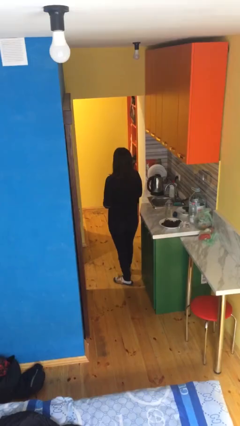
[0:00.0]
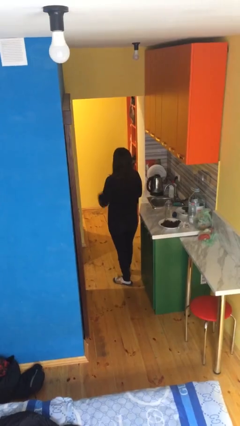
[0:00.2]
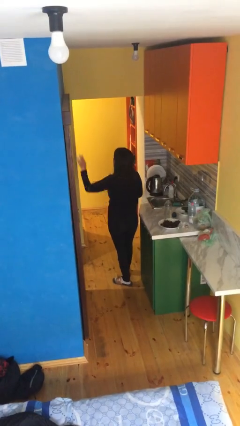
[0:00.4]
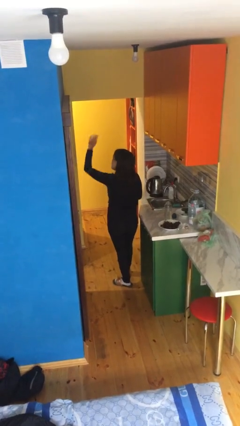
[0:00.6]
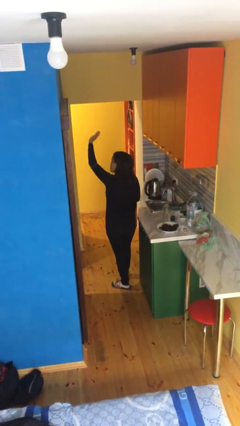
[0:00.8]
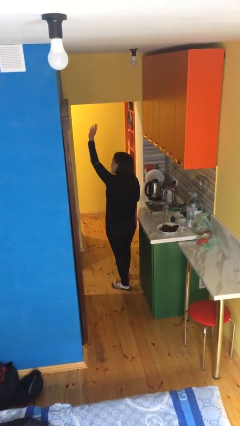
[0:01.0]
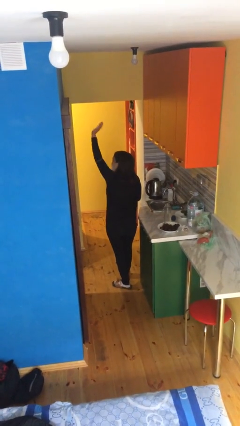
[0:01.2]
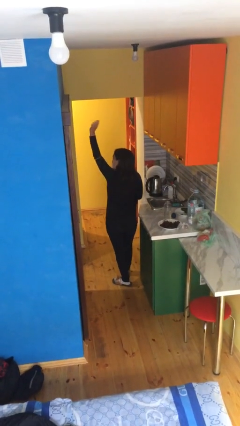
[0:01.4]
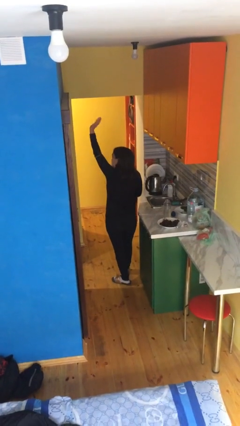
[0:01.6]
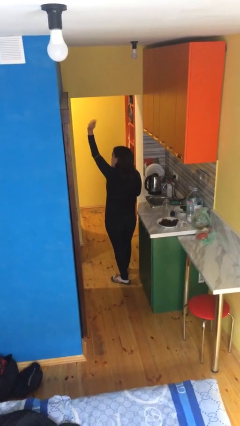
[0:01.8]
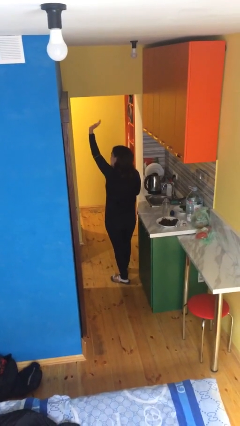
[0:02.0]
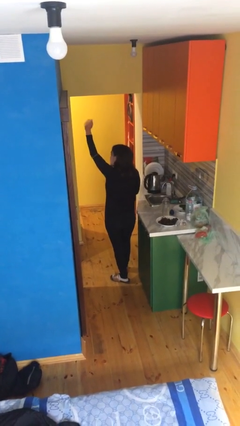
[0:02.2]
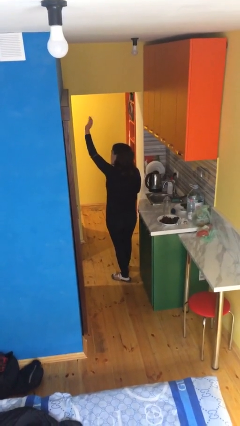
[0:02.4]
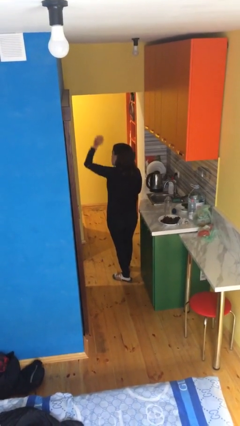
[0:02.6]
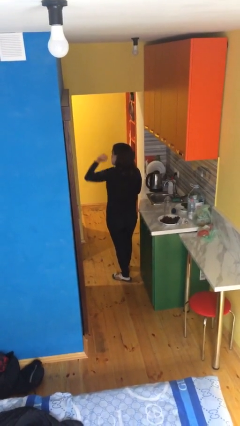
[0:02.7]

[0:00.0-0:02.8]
person waves at person

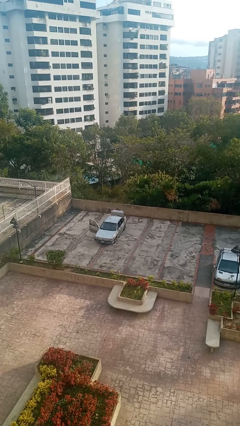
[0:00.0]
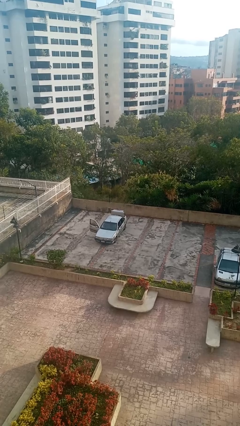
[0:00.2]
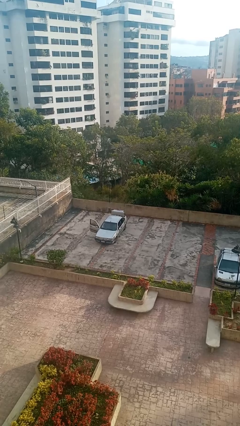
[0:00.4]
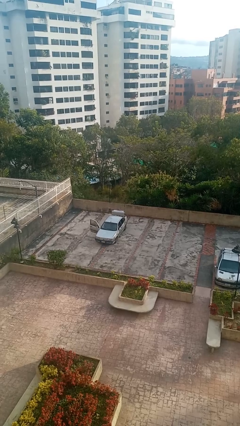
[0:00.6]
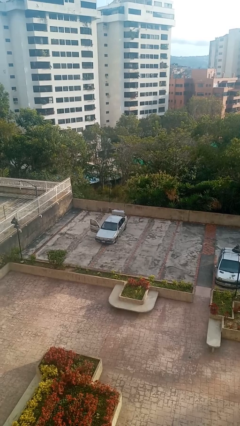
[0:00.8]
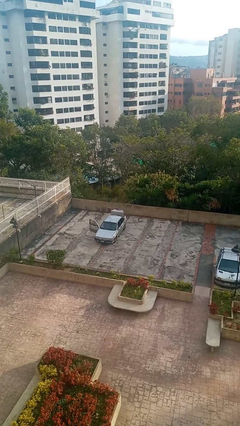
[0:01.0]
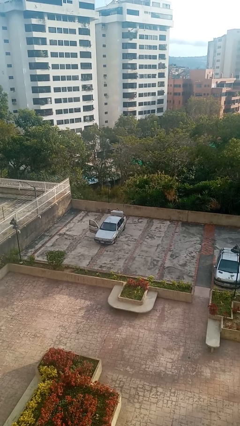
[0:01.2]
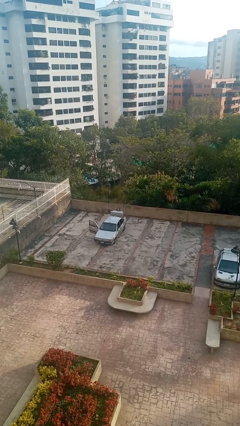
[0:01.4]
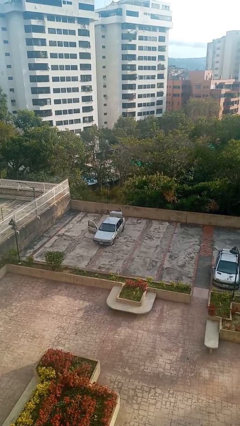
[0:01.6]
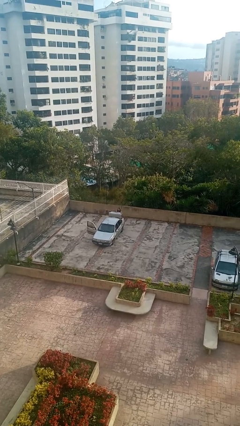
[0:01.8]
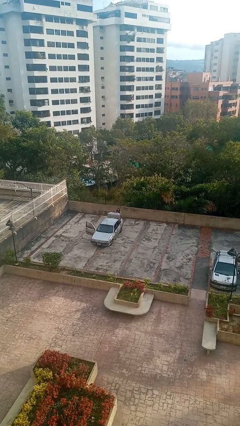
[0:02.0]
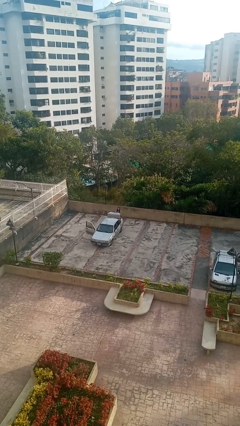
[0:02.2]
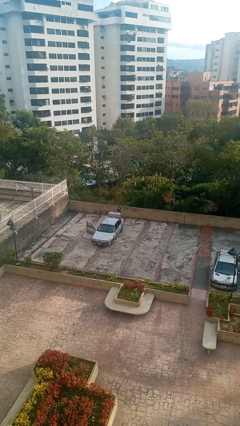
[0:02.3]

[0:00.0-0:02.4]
person unloads car

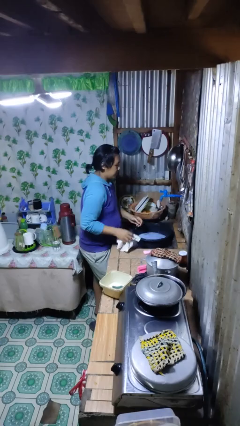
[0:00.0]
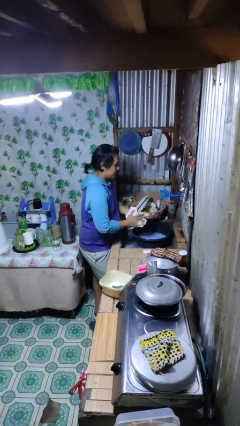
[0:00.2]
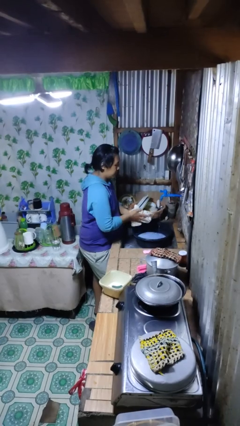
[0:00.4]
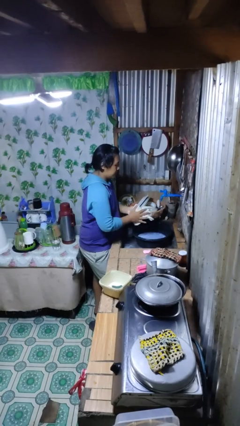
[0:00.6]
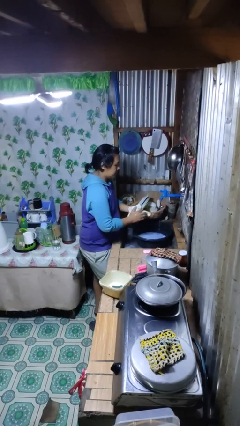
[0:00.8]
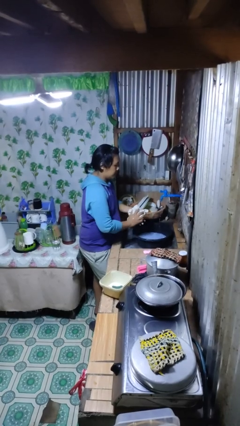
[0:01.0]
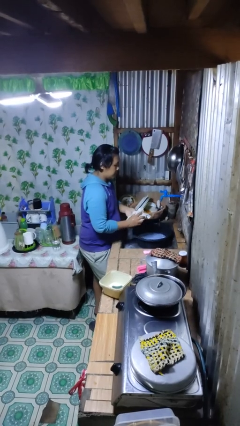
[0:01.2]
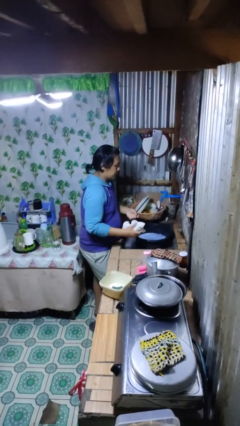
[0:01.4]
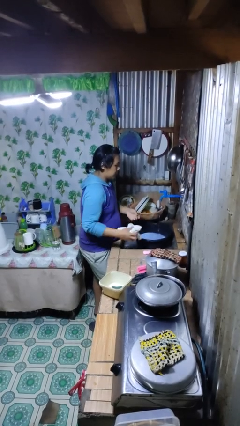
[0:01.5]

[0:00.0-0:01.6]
person dries hands with towel

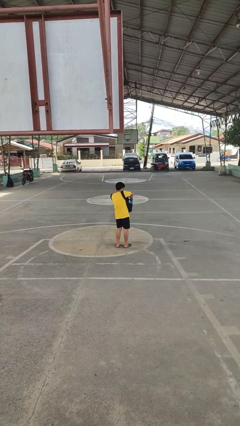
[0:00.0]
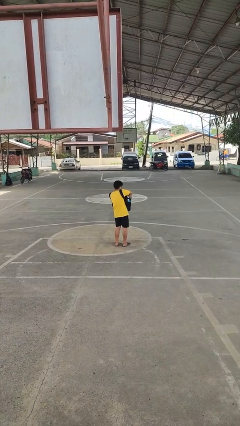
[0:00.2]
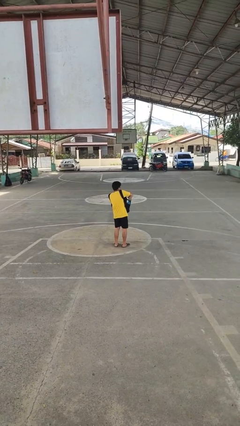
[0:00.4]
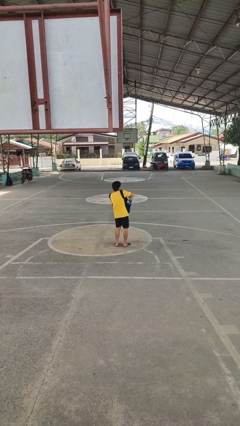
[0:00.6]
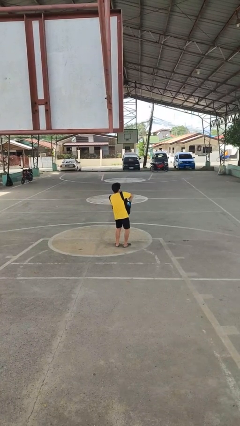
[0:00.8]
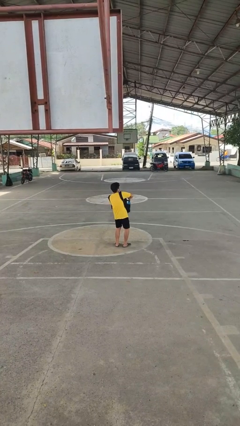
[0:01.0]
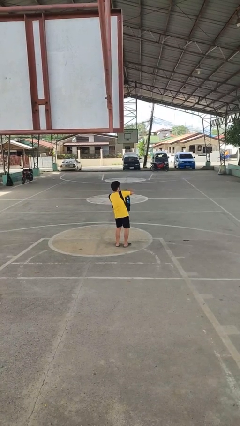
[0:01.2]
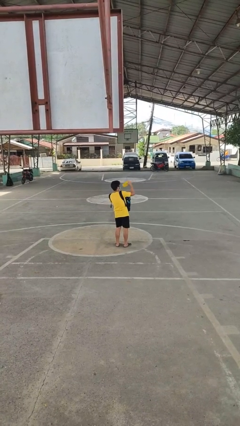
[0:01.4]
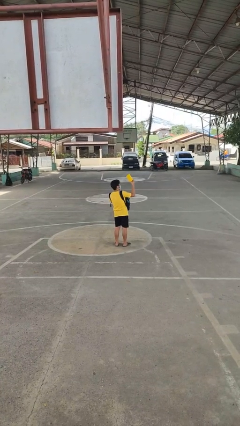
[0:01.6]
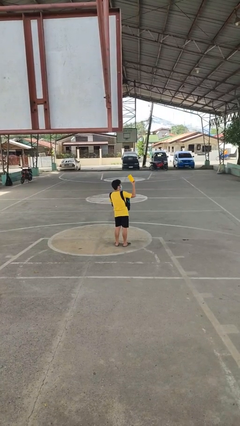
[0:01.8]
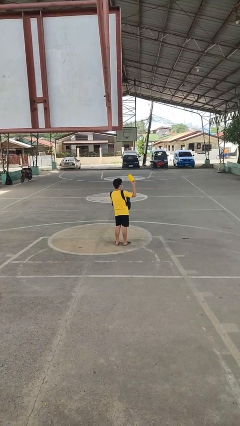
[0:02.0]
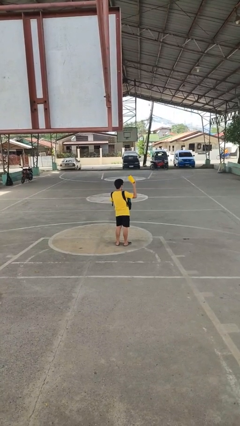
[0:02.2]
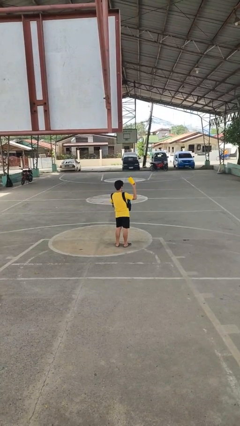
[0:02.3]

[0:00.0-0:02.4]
person takes object from backpack

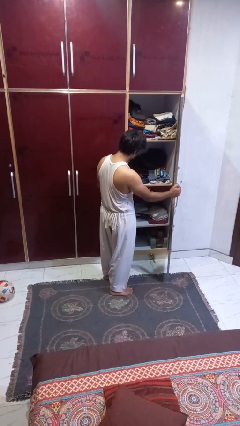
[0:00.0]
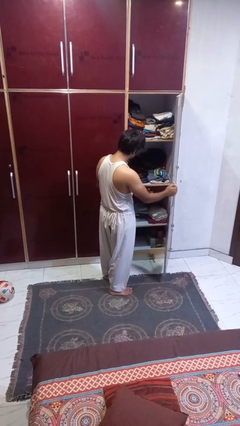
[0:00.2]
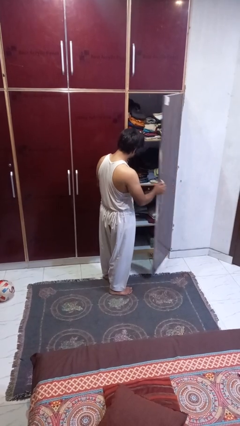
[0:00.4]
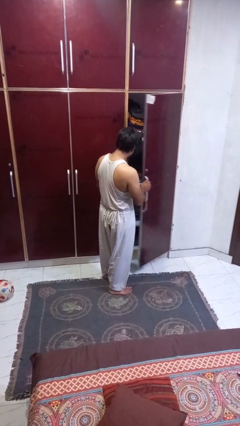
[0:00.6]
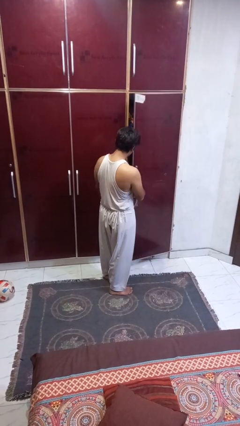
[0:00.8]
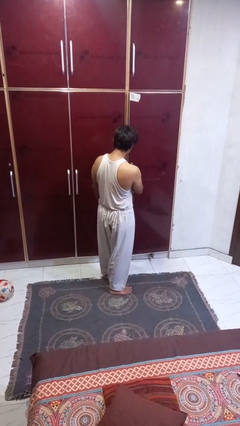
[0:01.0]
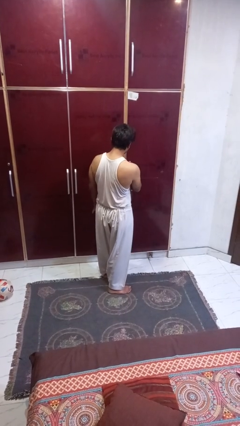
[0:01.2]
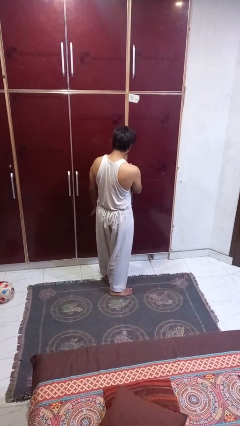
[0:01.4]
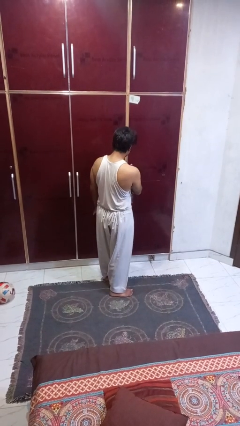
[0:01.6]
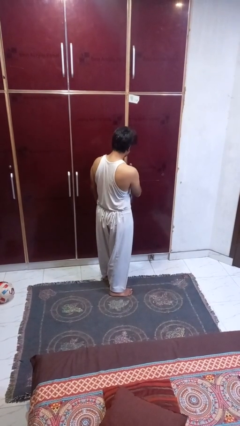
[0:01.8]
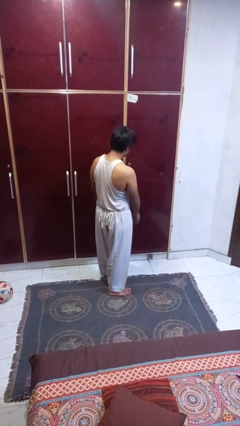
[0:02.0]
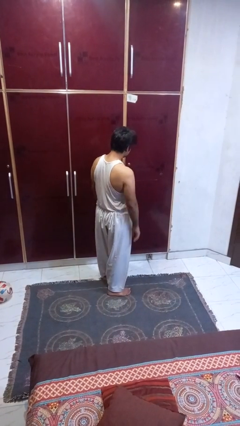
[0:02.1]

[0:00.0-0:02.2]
person closes closet door

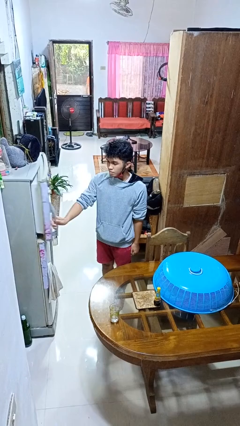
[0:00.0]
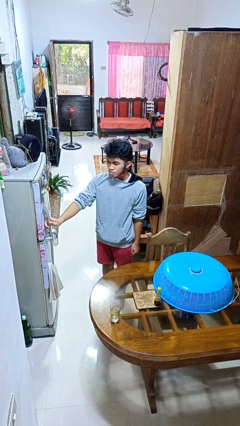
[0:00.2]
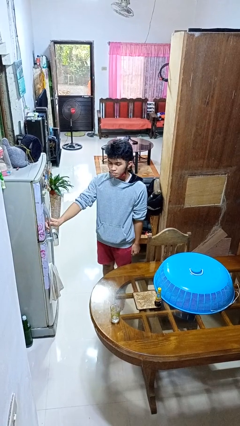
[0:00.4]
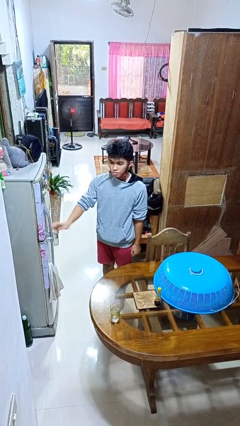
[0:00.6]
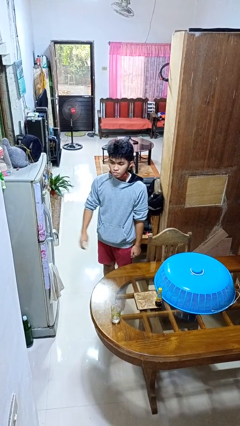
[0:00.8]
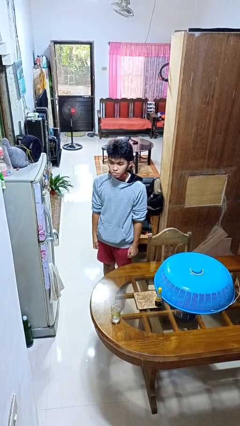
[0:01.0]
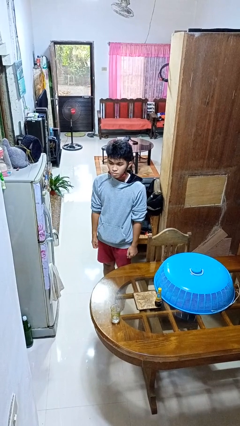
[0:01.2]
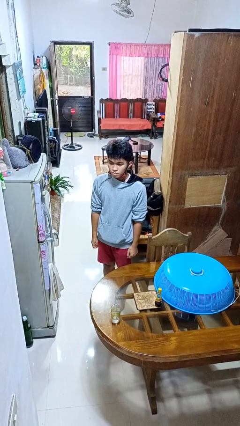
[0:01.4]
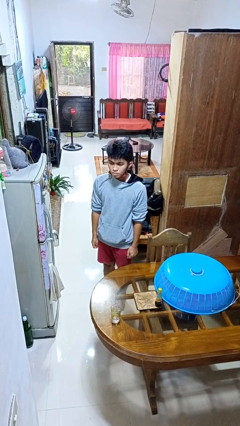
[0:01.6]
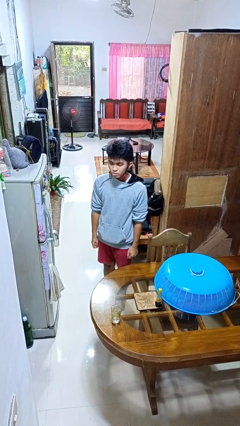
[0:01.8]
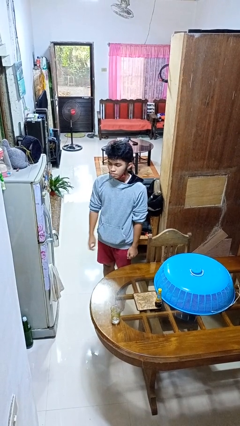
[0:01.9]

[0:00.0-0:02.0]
person closes refrigerator

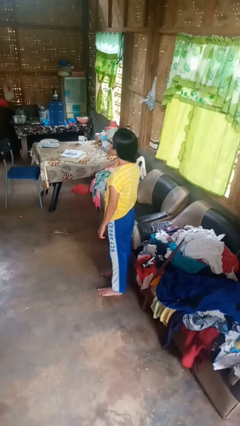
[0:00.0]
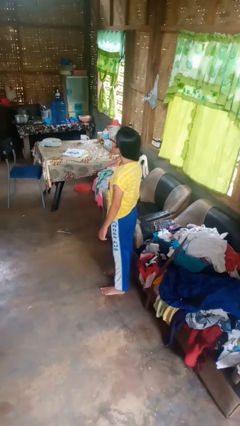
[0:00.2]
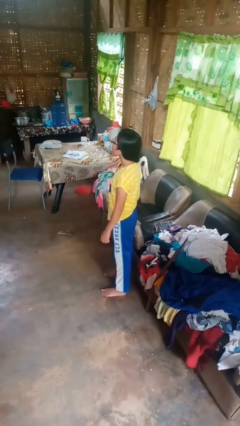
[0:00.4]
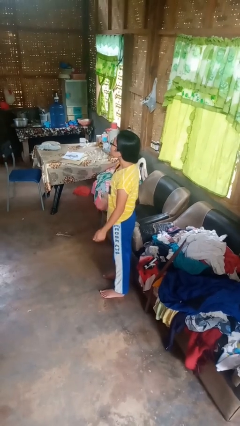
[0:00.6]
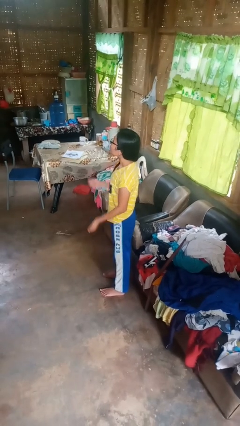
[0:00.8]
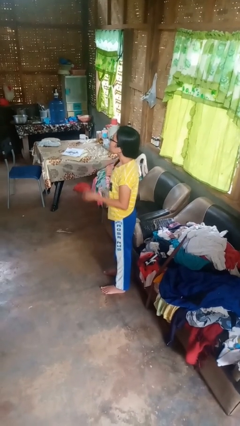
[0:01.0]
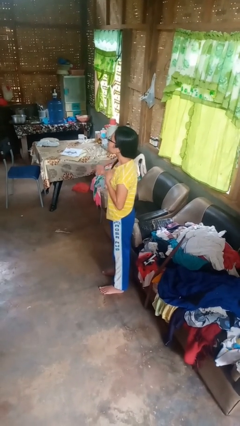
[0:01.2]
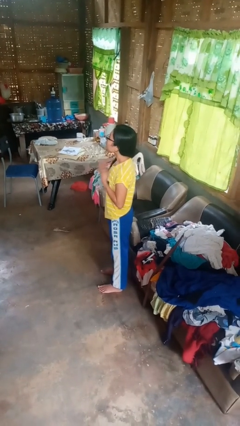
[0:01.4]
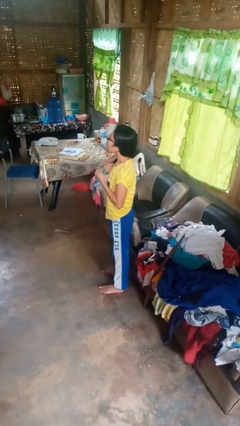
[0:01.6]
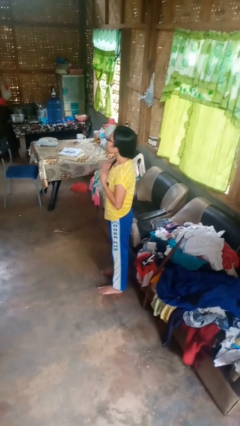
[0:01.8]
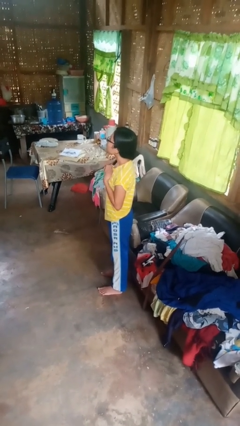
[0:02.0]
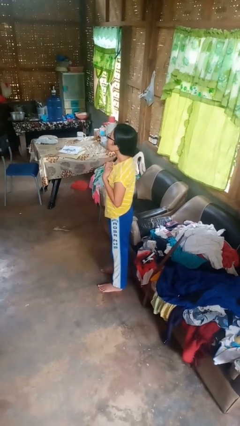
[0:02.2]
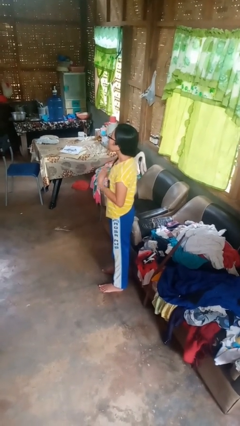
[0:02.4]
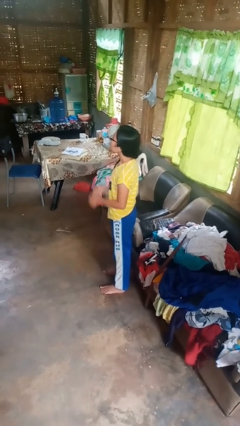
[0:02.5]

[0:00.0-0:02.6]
person drums on chest

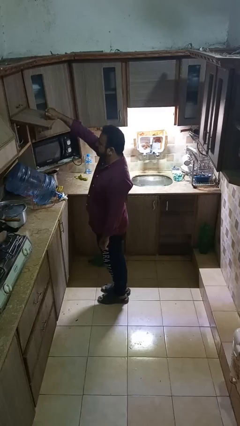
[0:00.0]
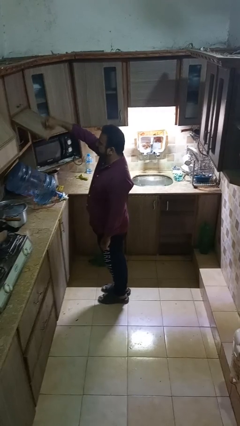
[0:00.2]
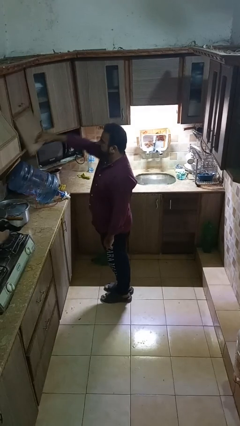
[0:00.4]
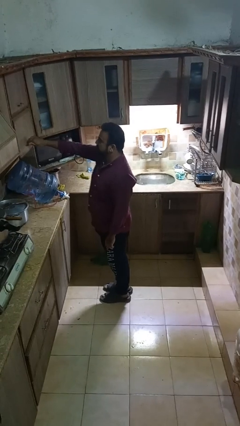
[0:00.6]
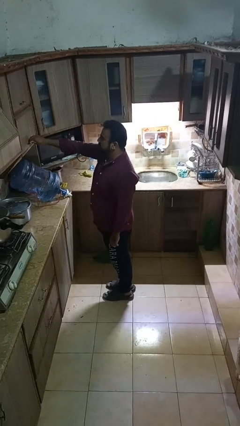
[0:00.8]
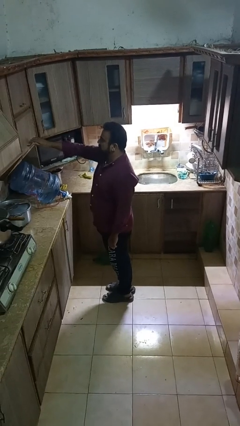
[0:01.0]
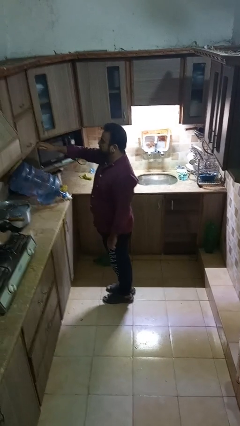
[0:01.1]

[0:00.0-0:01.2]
person closes cabinet
